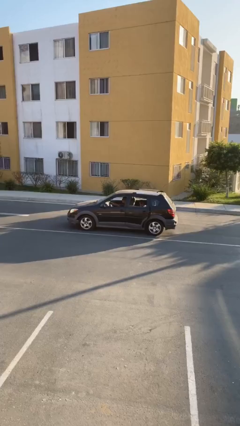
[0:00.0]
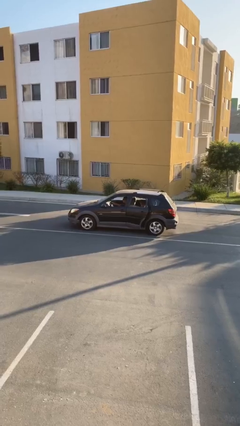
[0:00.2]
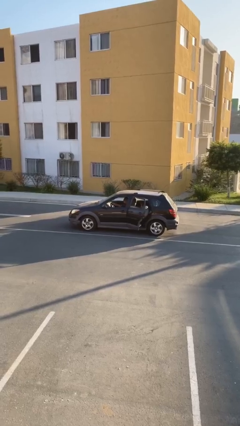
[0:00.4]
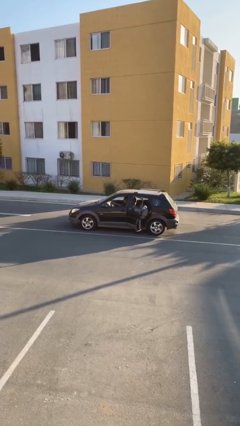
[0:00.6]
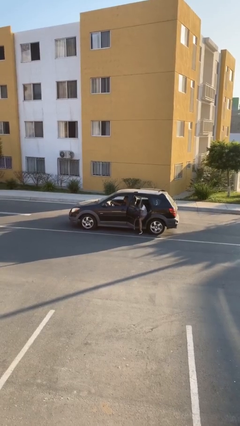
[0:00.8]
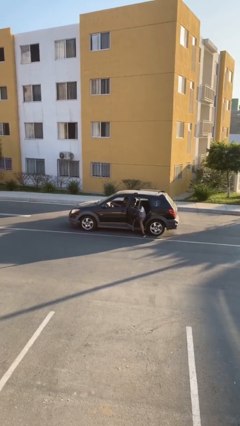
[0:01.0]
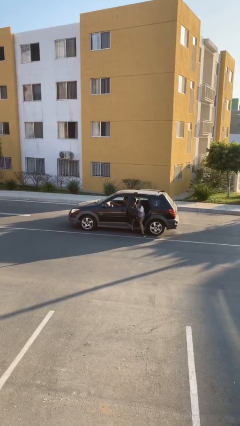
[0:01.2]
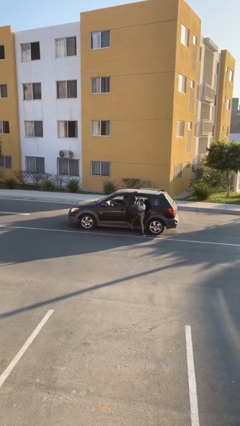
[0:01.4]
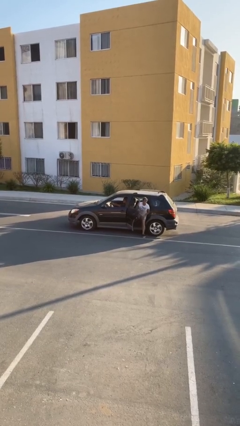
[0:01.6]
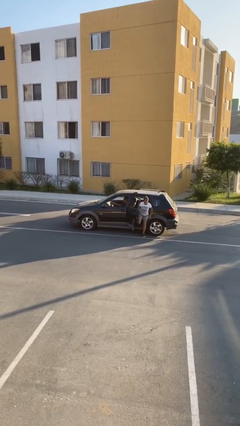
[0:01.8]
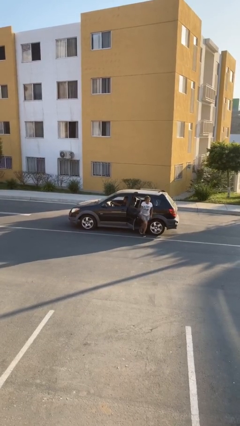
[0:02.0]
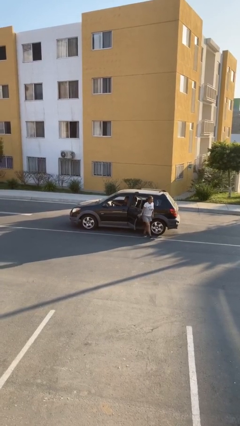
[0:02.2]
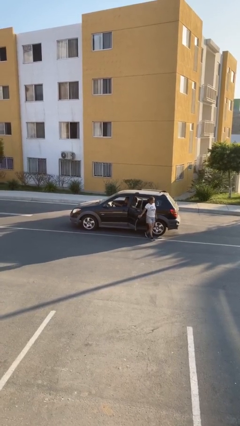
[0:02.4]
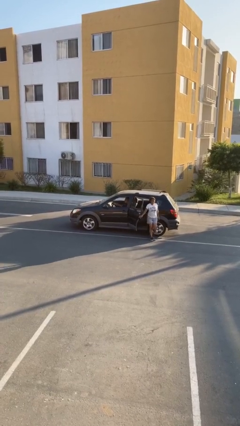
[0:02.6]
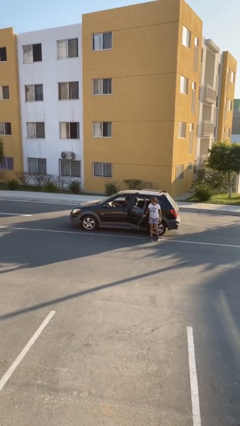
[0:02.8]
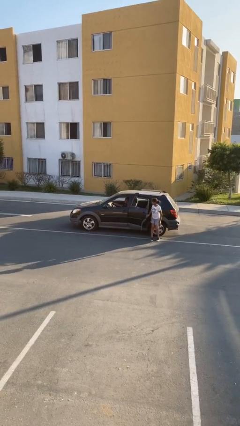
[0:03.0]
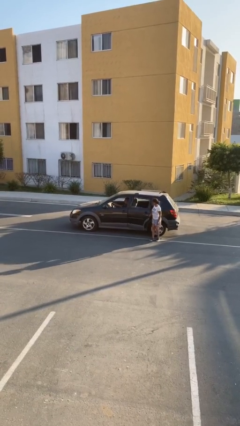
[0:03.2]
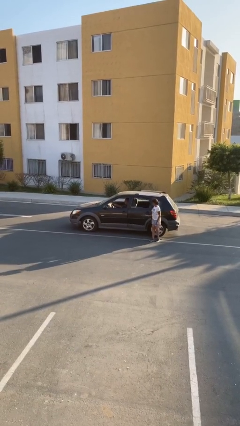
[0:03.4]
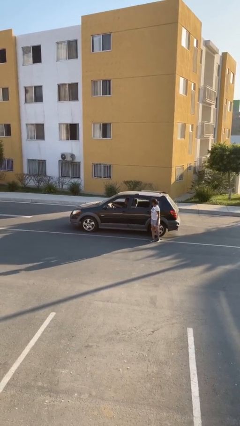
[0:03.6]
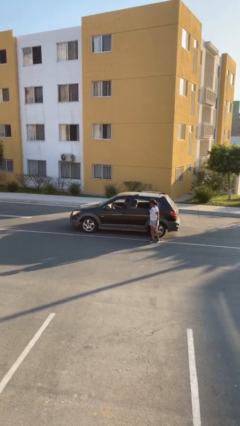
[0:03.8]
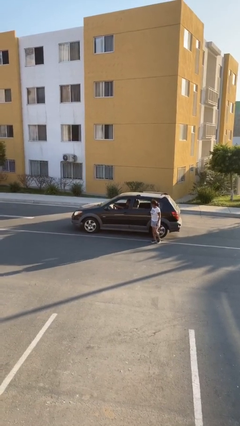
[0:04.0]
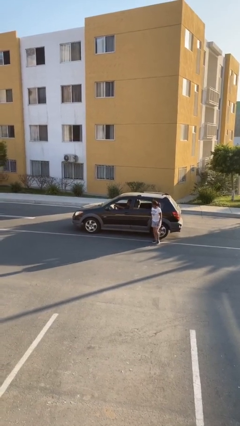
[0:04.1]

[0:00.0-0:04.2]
car drops off person

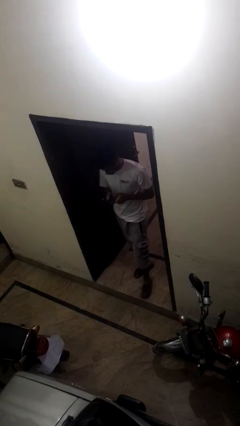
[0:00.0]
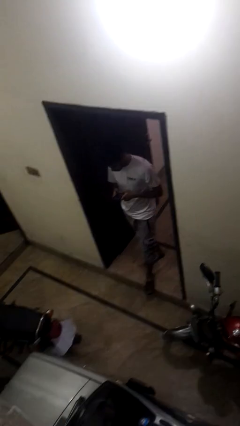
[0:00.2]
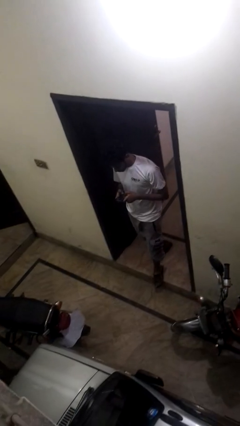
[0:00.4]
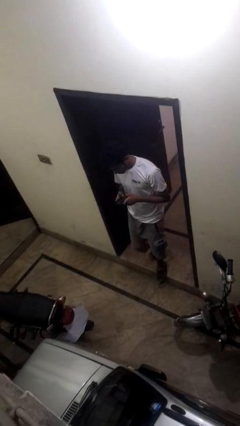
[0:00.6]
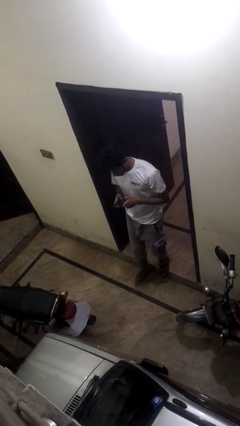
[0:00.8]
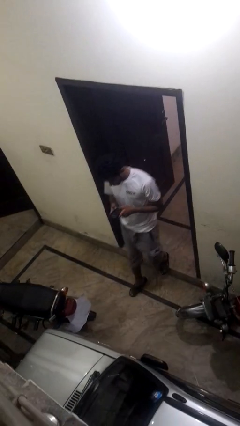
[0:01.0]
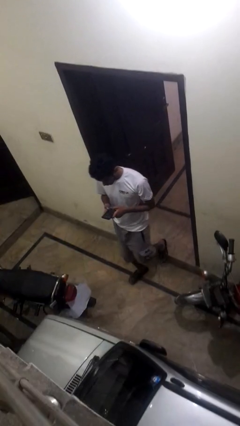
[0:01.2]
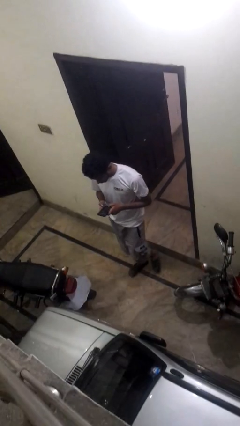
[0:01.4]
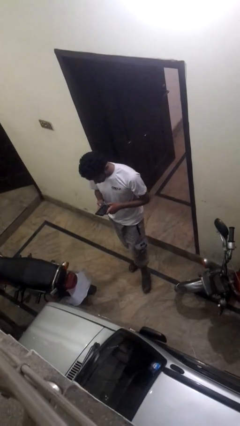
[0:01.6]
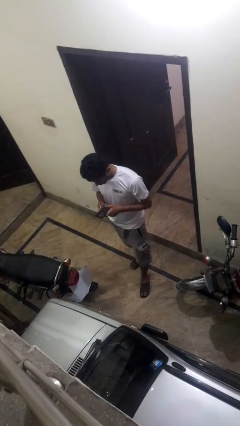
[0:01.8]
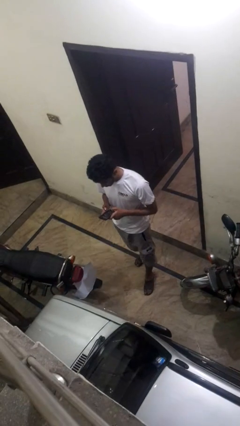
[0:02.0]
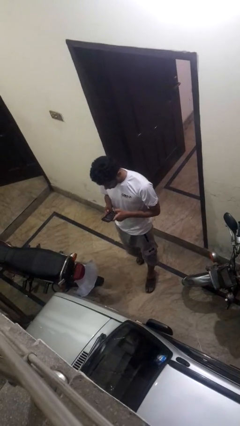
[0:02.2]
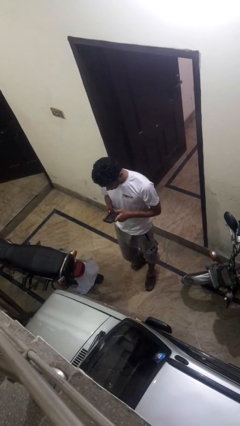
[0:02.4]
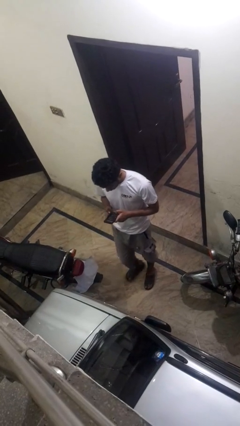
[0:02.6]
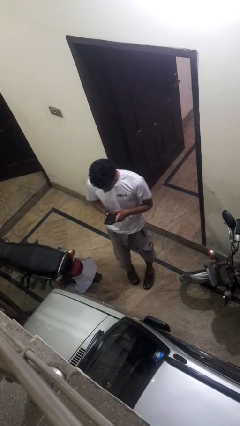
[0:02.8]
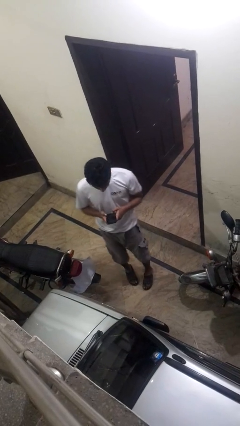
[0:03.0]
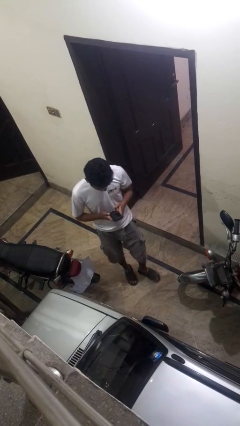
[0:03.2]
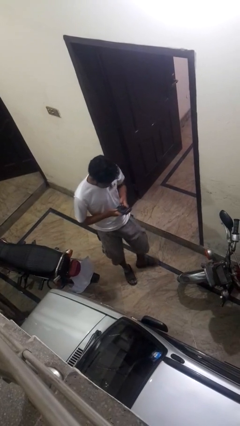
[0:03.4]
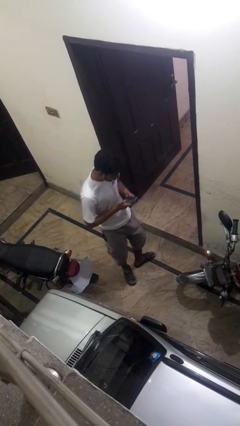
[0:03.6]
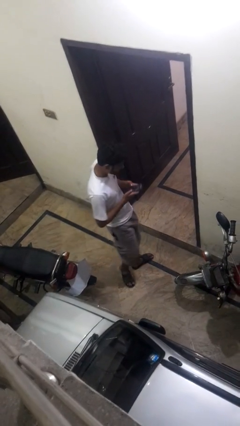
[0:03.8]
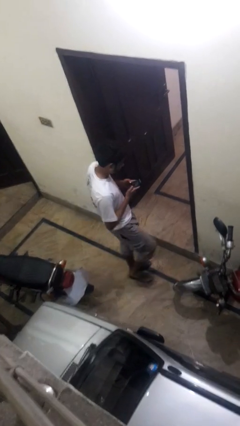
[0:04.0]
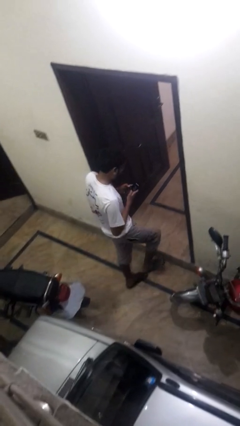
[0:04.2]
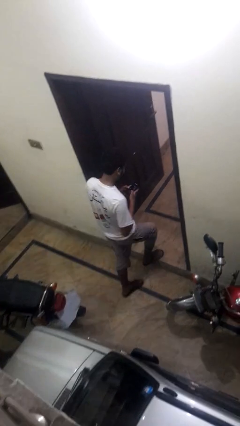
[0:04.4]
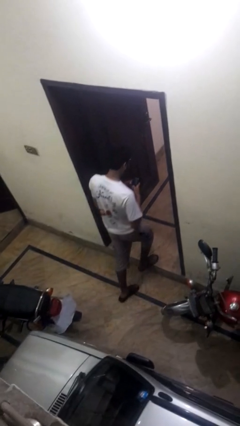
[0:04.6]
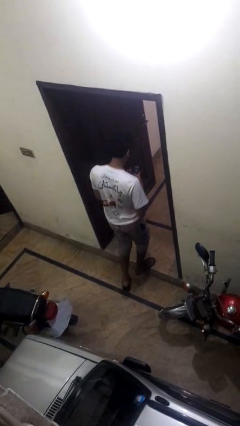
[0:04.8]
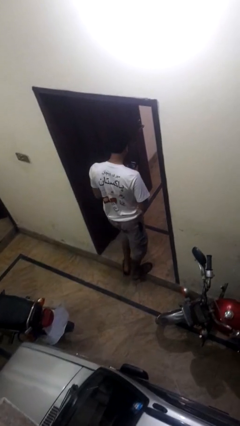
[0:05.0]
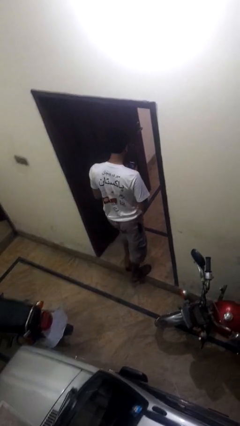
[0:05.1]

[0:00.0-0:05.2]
person enters scene through structure

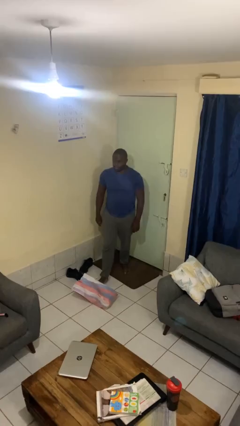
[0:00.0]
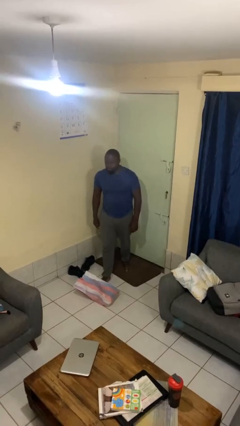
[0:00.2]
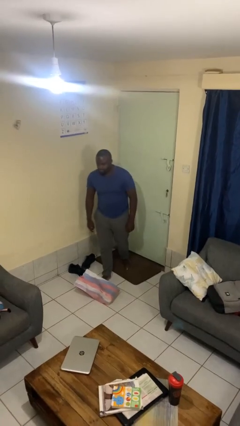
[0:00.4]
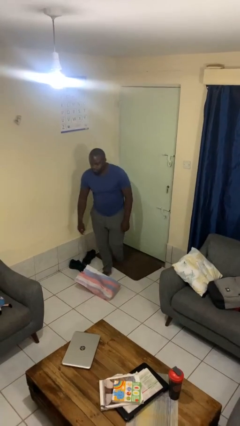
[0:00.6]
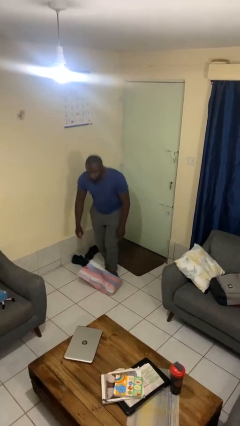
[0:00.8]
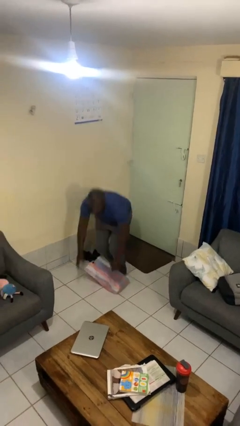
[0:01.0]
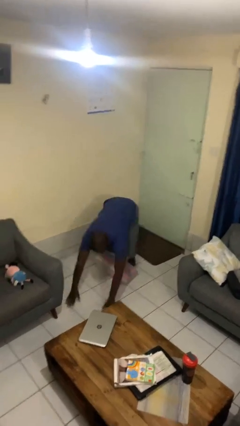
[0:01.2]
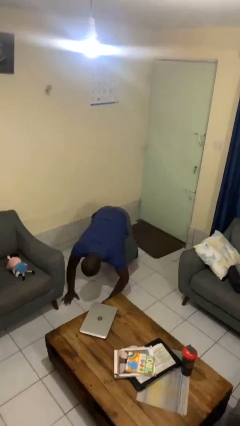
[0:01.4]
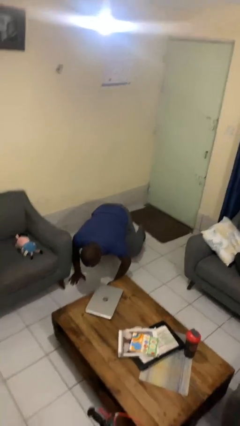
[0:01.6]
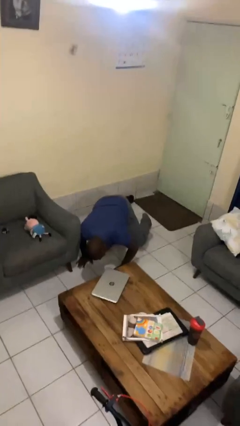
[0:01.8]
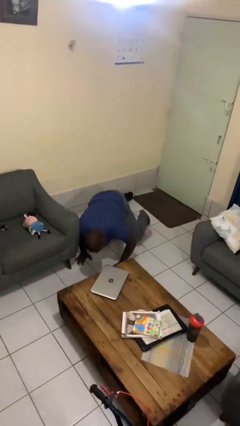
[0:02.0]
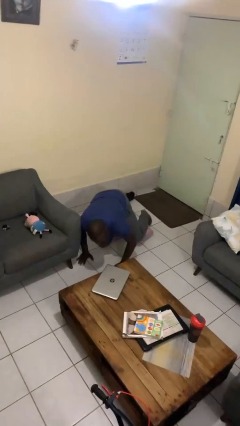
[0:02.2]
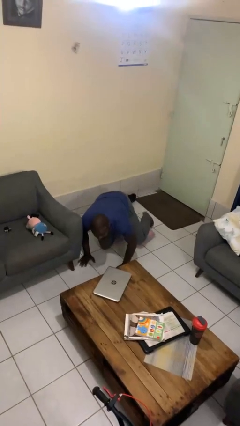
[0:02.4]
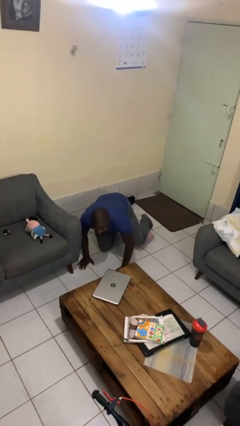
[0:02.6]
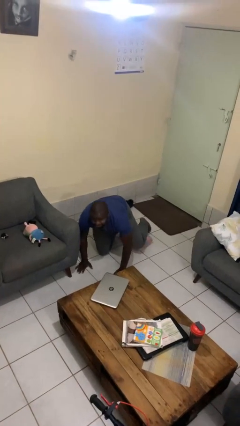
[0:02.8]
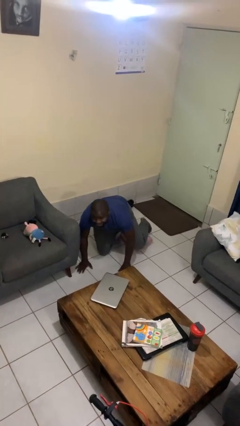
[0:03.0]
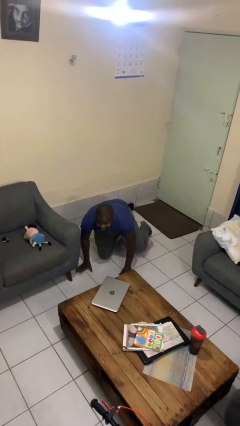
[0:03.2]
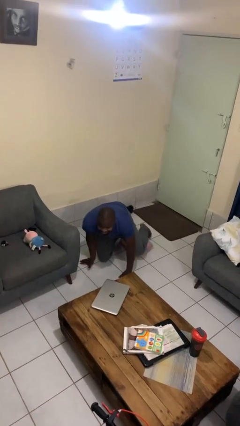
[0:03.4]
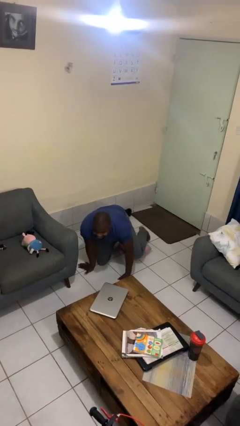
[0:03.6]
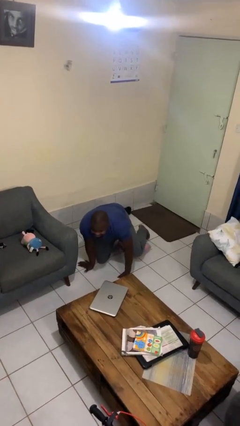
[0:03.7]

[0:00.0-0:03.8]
person trips on object on floor

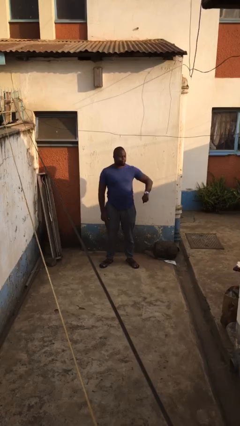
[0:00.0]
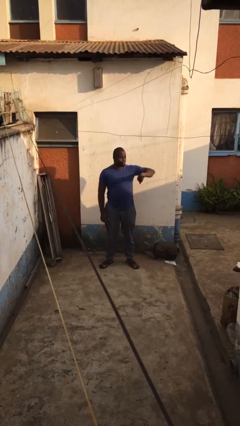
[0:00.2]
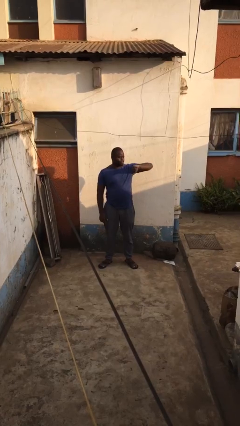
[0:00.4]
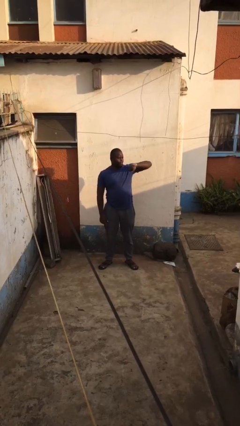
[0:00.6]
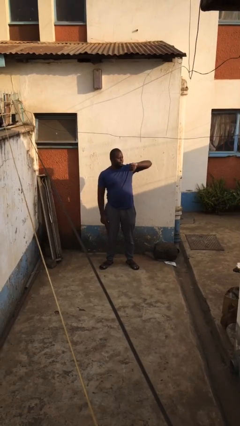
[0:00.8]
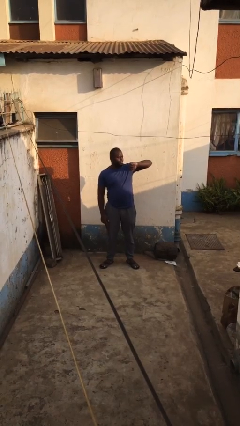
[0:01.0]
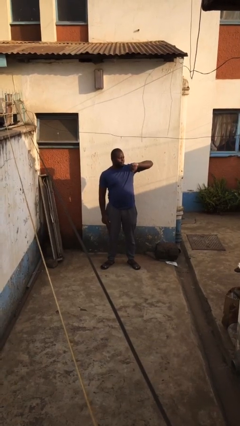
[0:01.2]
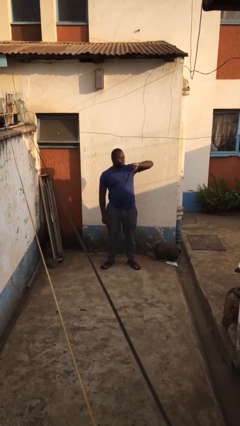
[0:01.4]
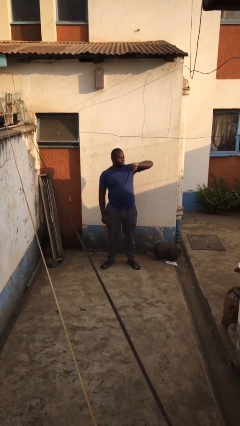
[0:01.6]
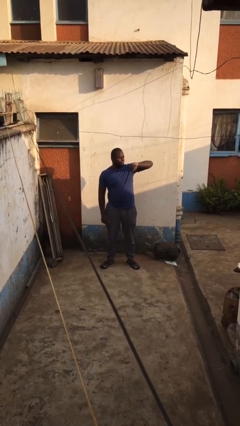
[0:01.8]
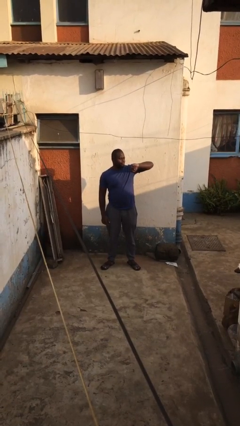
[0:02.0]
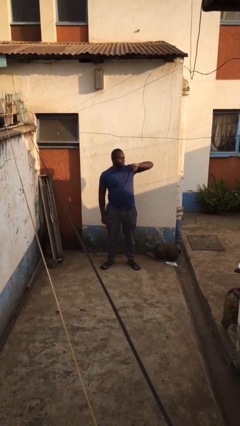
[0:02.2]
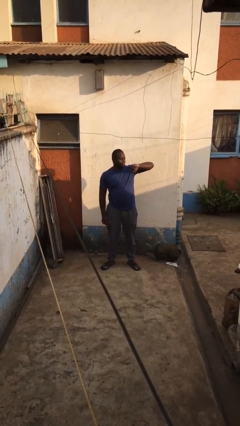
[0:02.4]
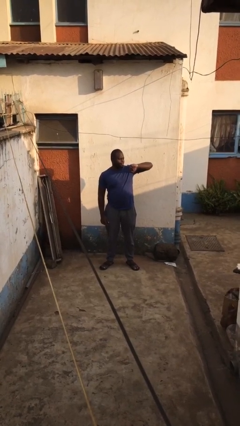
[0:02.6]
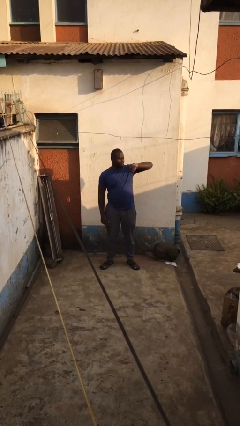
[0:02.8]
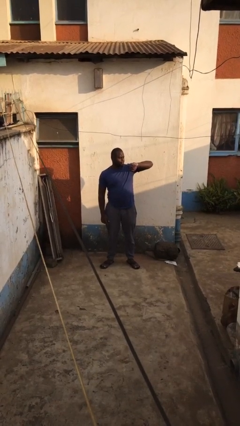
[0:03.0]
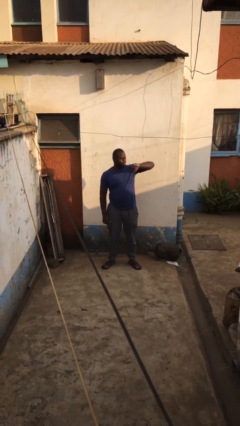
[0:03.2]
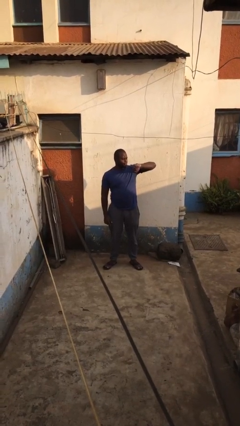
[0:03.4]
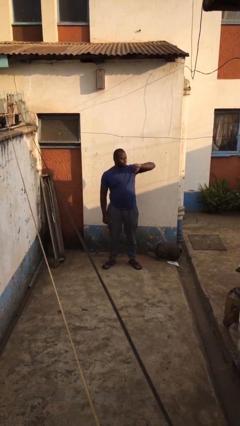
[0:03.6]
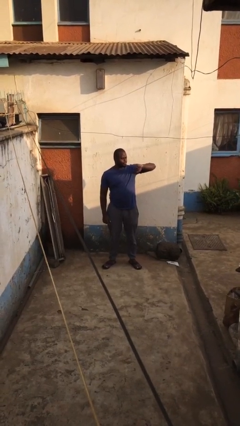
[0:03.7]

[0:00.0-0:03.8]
person looks at wristwatch

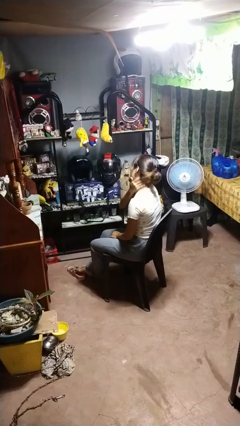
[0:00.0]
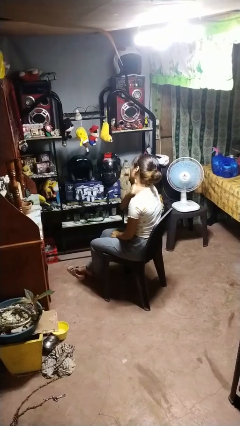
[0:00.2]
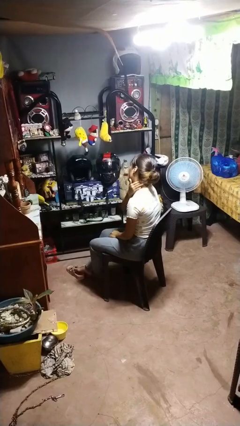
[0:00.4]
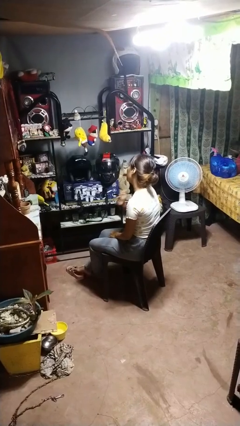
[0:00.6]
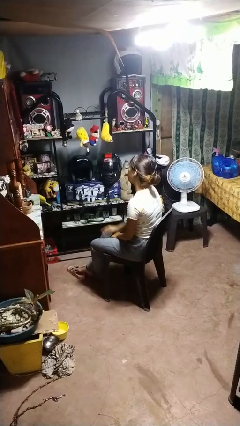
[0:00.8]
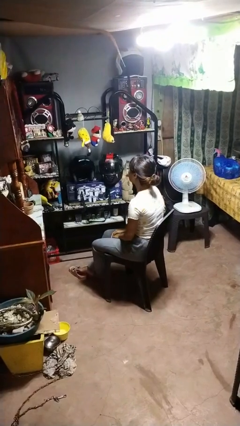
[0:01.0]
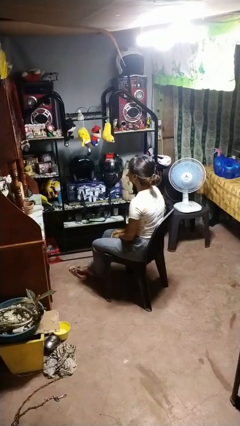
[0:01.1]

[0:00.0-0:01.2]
person rubs neck
